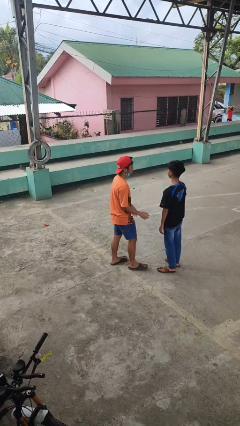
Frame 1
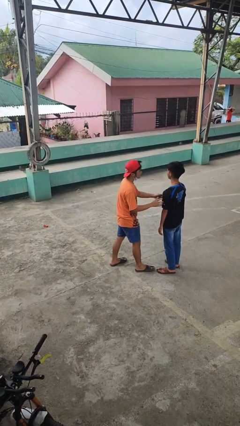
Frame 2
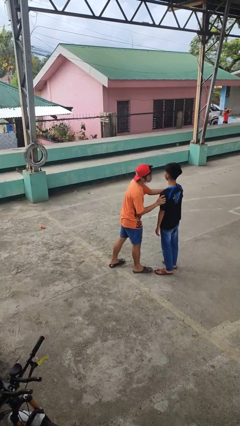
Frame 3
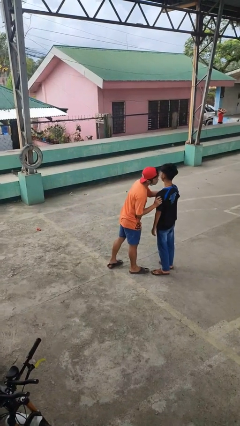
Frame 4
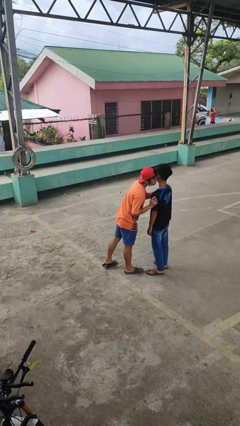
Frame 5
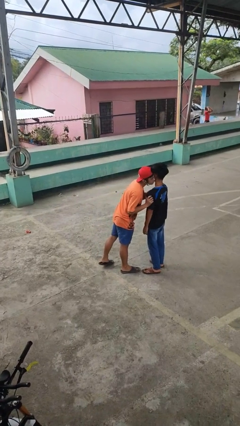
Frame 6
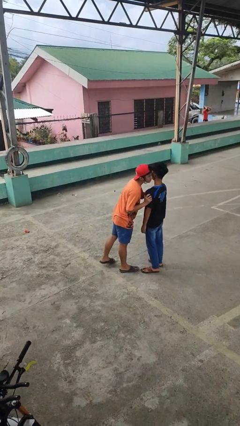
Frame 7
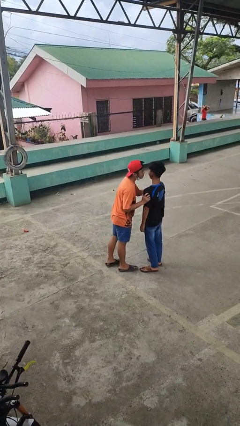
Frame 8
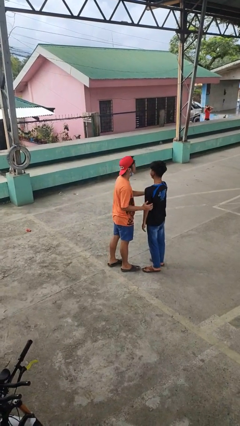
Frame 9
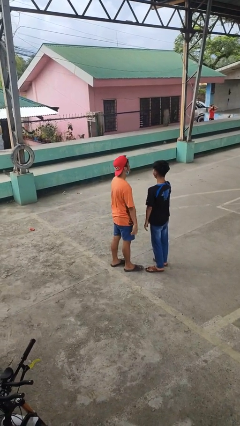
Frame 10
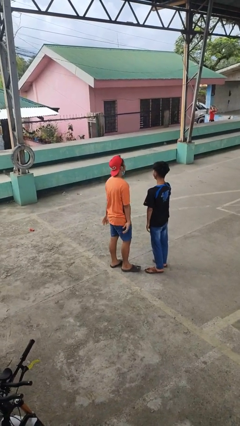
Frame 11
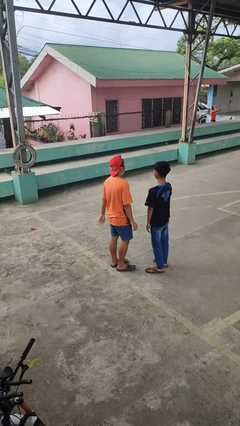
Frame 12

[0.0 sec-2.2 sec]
person kisses cheek of person

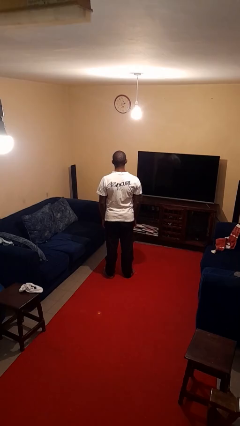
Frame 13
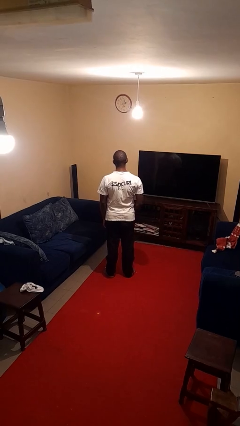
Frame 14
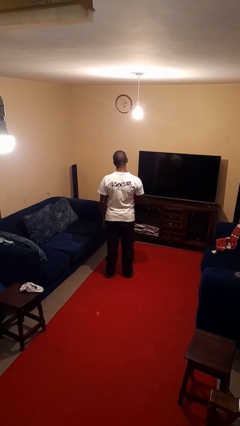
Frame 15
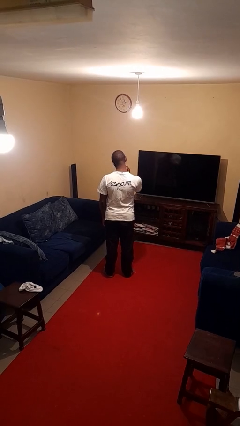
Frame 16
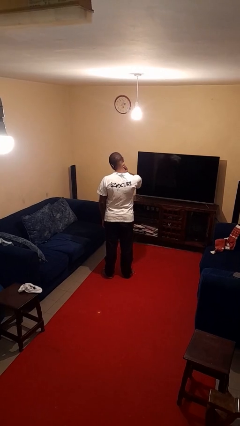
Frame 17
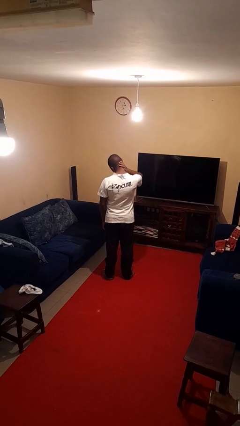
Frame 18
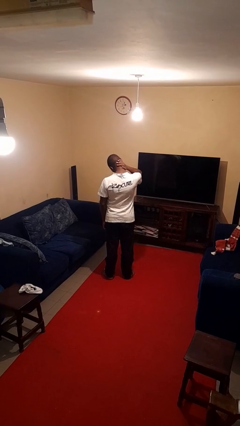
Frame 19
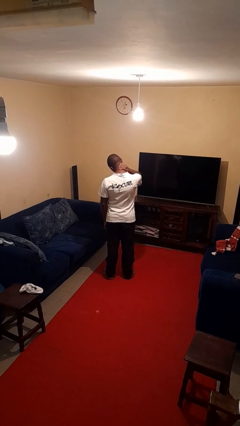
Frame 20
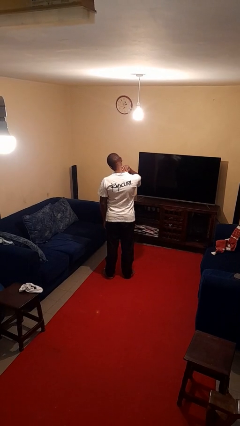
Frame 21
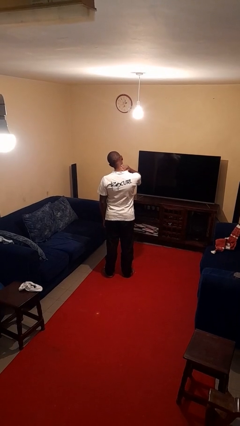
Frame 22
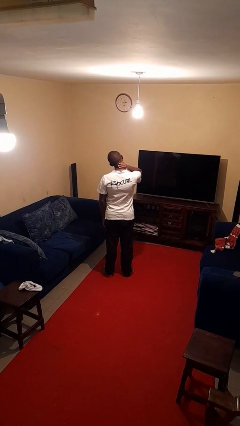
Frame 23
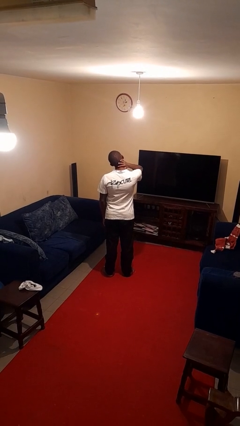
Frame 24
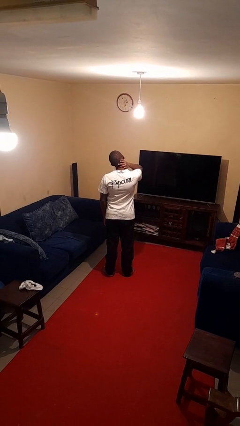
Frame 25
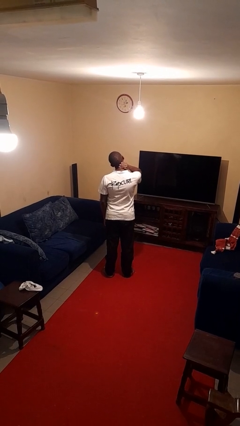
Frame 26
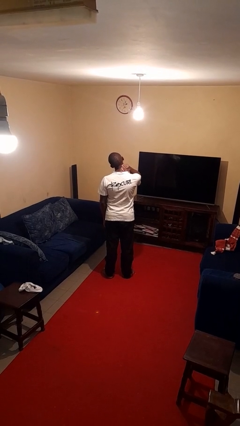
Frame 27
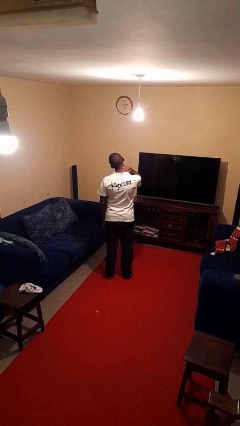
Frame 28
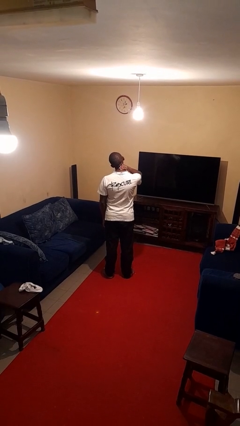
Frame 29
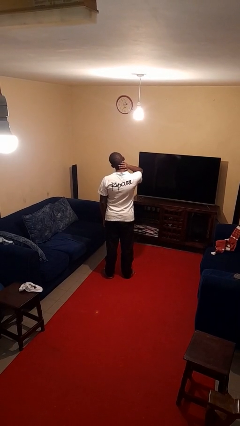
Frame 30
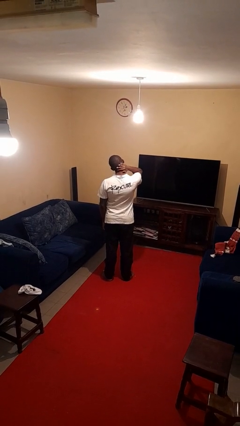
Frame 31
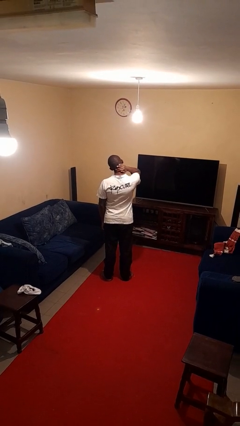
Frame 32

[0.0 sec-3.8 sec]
person rubs neck

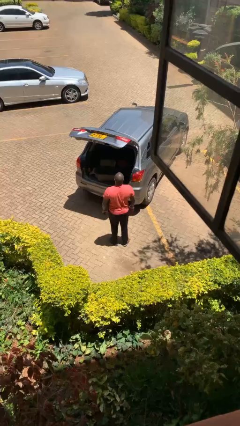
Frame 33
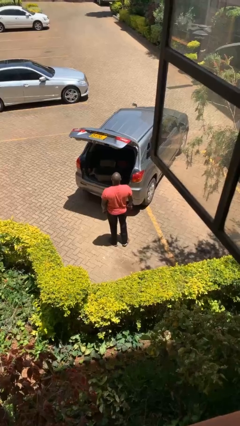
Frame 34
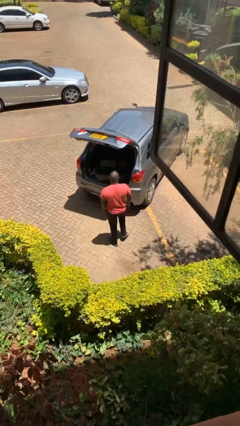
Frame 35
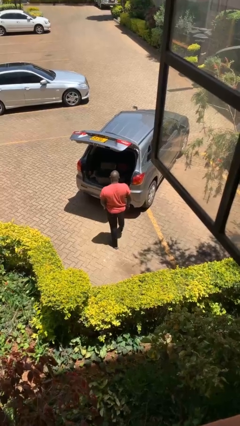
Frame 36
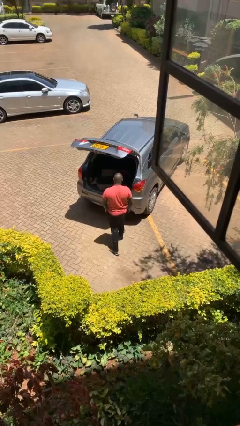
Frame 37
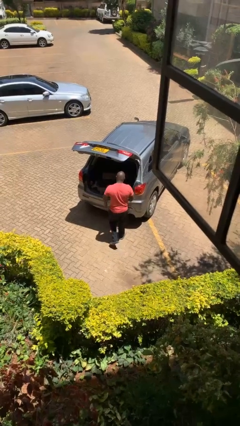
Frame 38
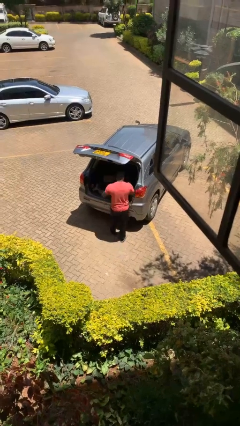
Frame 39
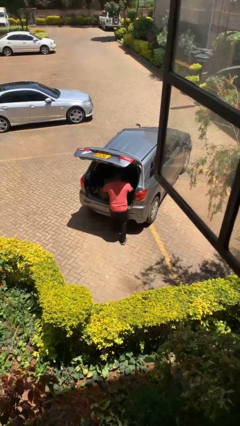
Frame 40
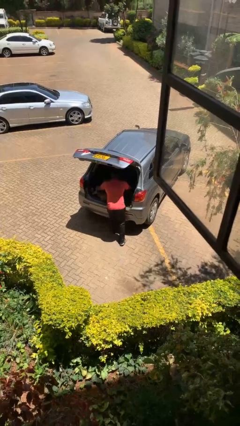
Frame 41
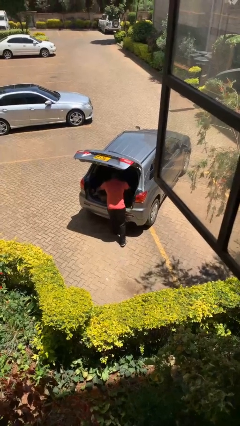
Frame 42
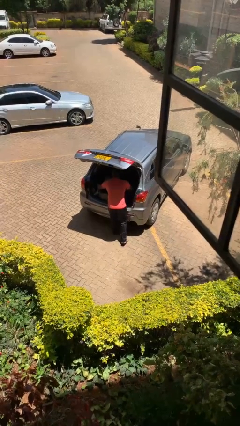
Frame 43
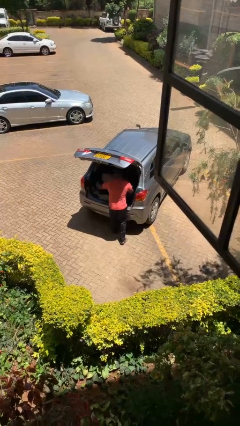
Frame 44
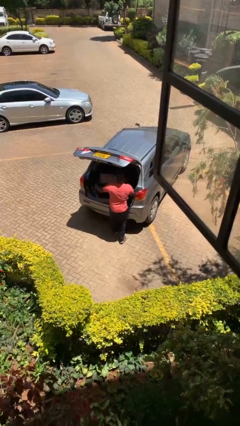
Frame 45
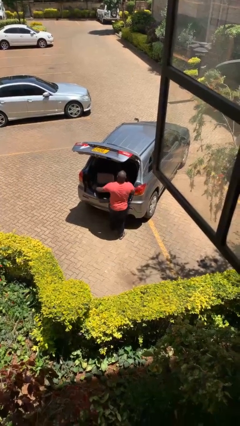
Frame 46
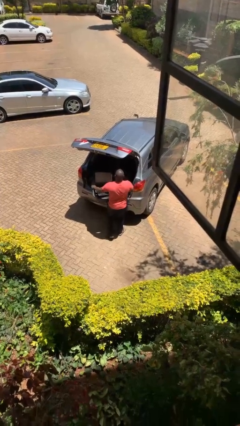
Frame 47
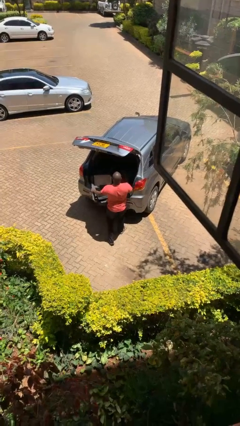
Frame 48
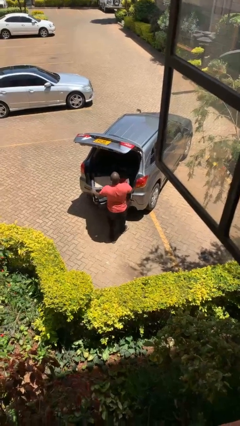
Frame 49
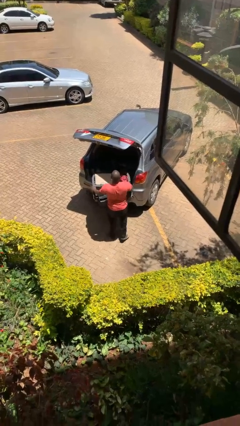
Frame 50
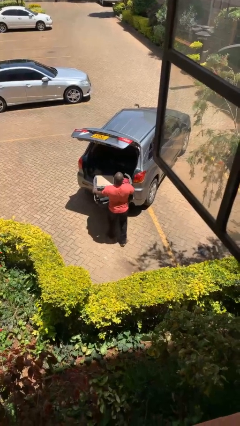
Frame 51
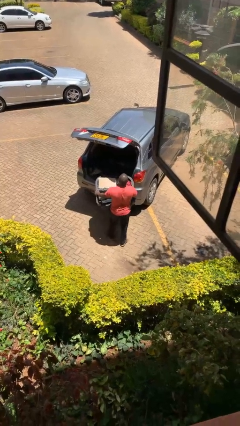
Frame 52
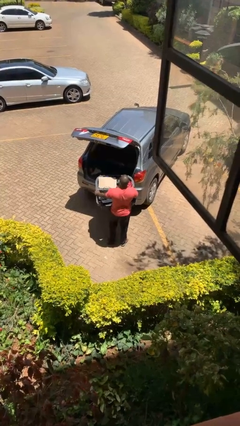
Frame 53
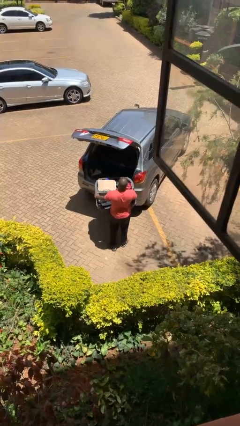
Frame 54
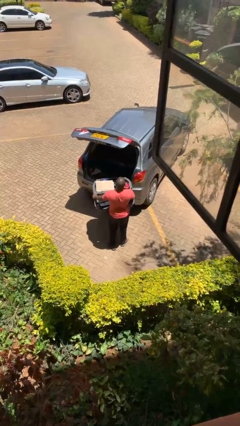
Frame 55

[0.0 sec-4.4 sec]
person unloads car

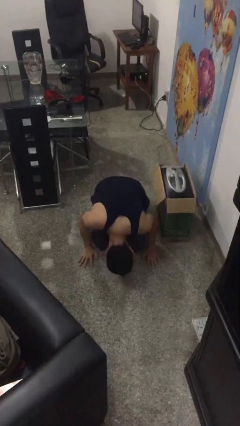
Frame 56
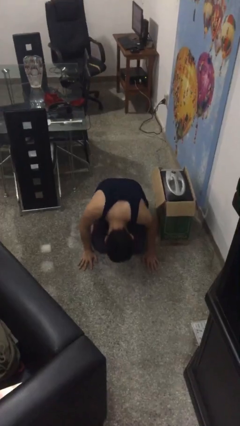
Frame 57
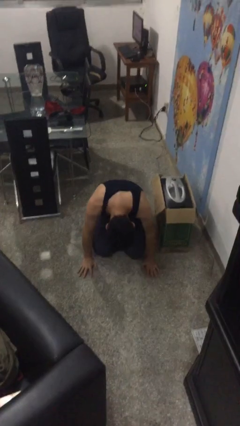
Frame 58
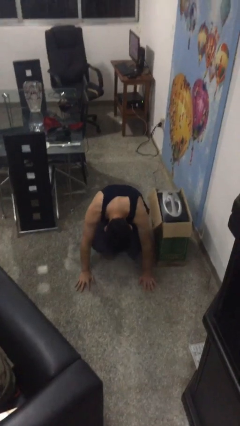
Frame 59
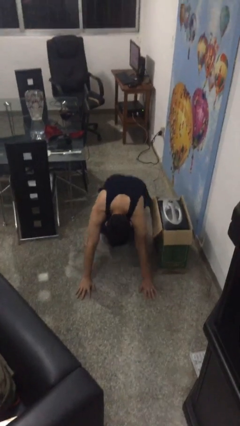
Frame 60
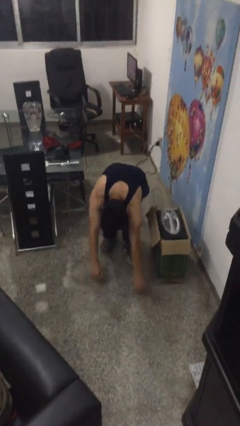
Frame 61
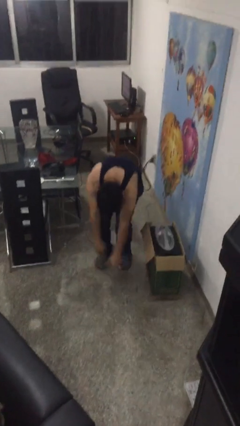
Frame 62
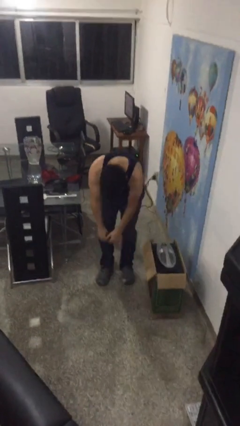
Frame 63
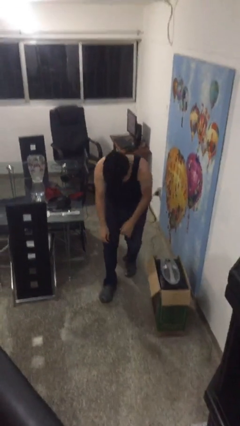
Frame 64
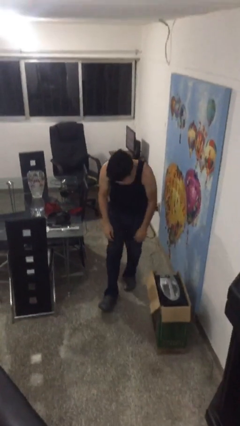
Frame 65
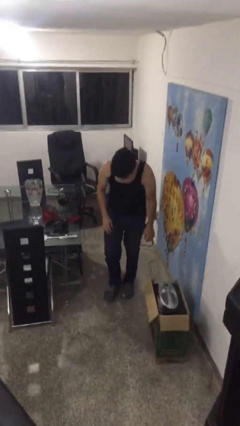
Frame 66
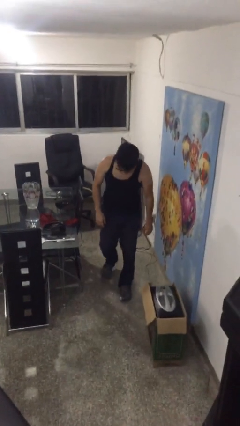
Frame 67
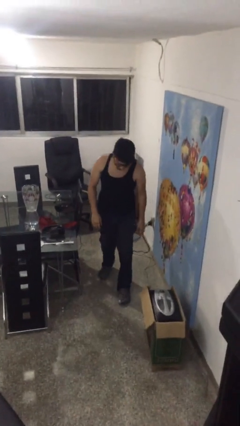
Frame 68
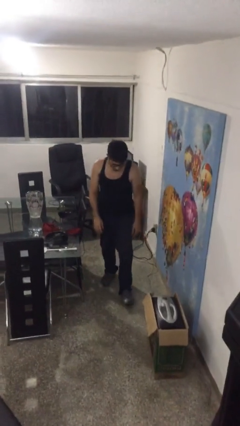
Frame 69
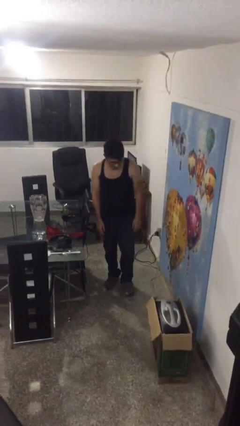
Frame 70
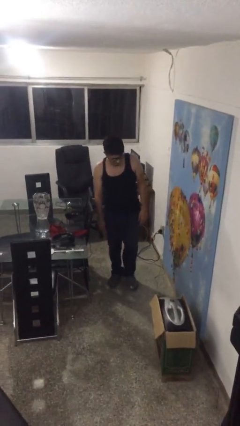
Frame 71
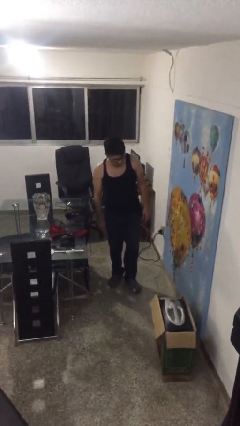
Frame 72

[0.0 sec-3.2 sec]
person stands up from floor

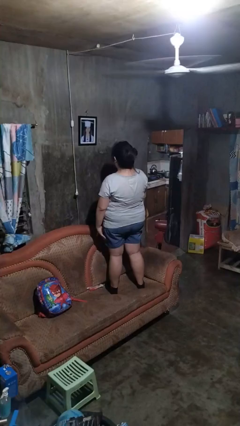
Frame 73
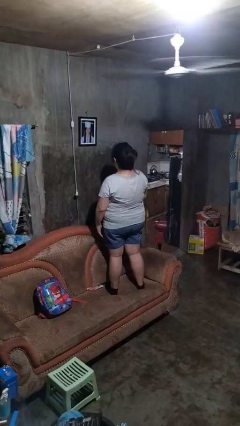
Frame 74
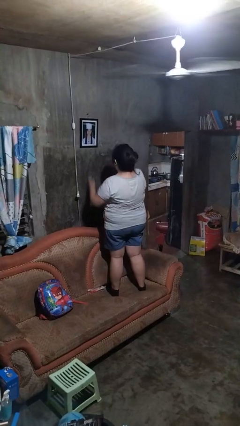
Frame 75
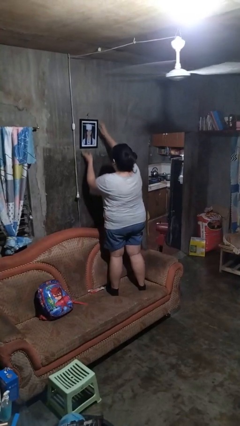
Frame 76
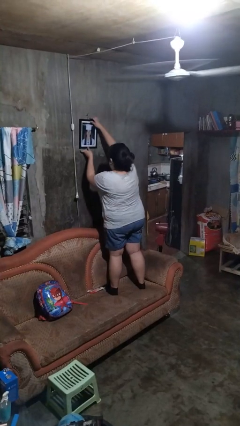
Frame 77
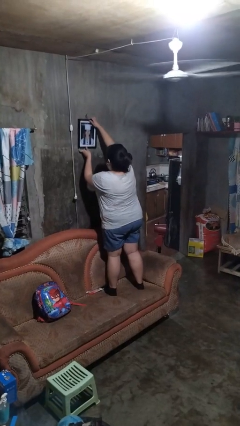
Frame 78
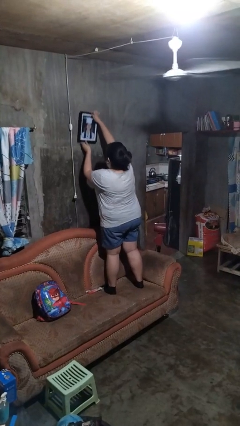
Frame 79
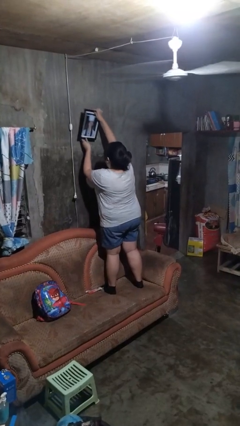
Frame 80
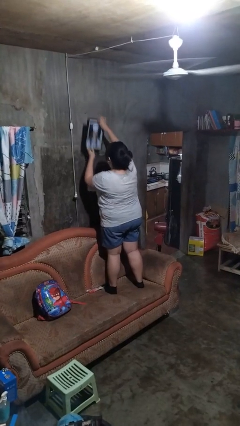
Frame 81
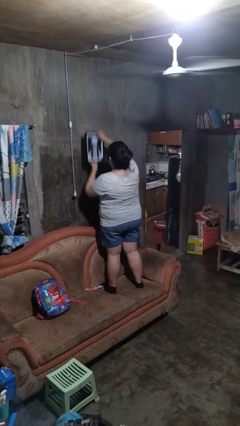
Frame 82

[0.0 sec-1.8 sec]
person takes down picture frame

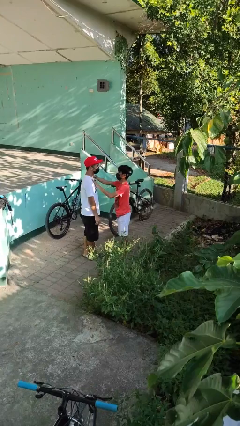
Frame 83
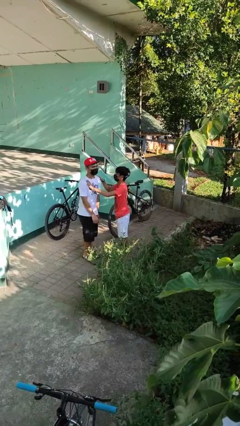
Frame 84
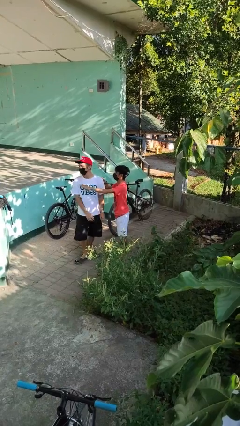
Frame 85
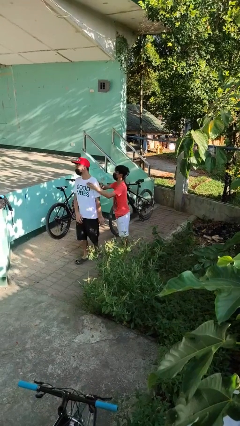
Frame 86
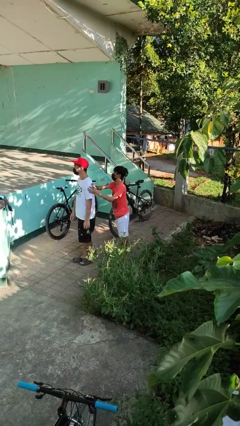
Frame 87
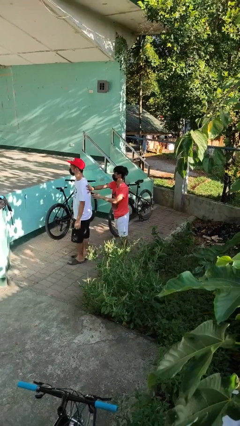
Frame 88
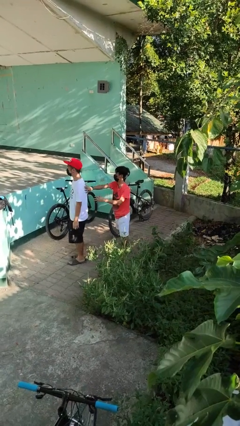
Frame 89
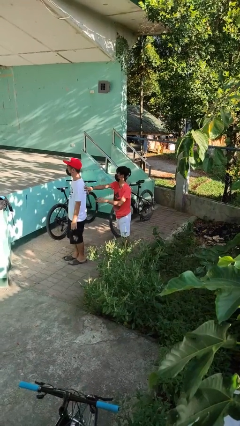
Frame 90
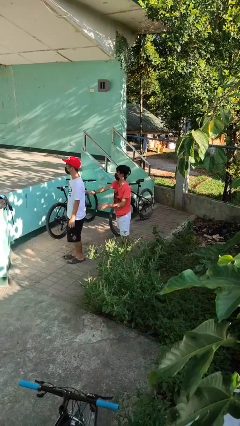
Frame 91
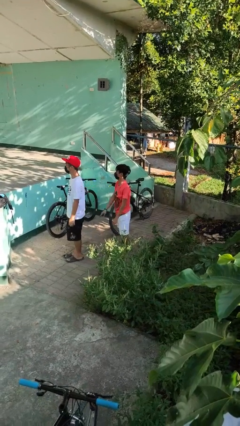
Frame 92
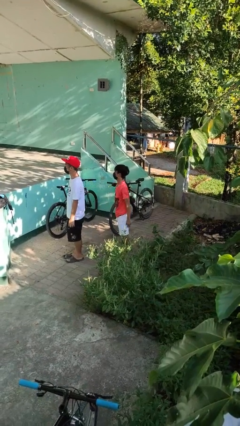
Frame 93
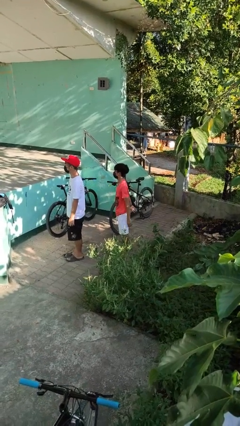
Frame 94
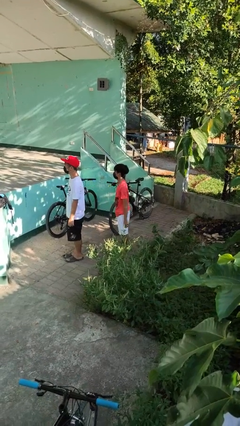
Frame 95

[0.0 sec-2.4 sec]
person spins person around
